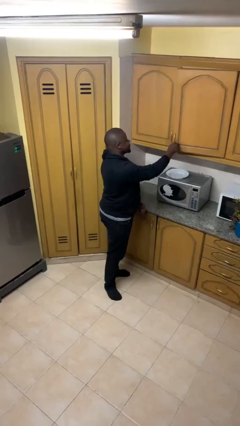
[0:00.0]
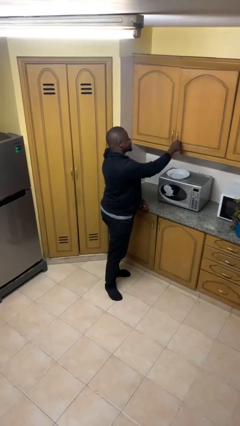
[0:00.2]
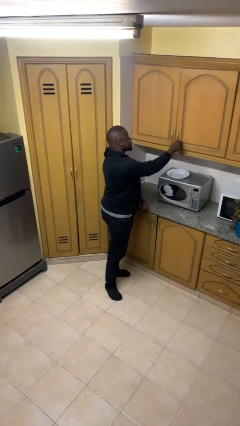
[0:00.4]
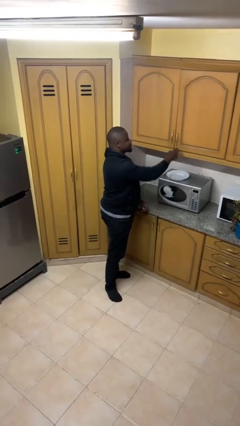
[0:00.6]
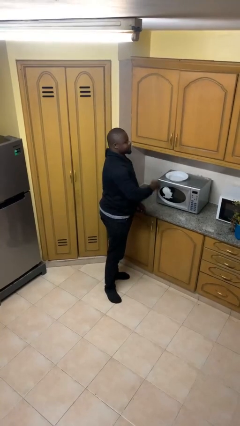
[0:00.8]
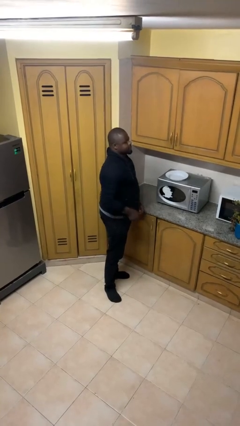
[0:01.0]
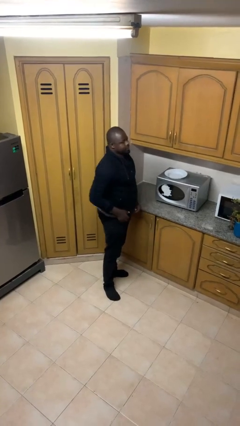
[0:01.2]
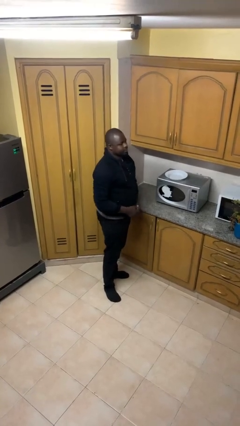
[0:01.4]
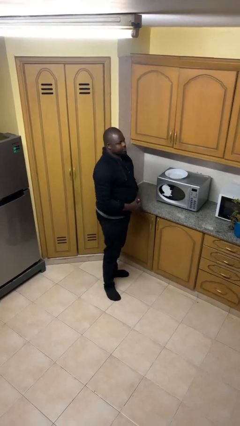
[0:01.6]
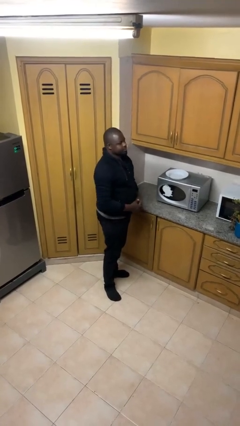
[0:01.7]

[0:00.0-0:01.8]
person closes cabinet

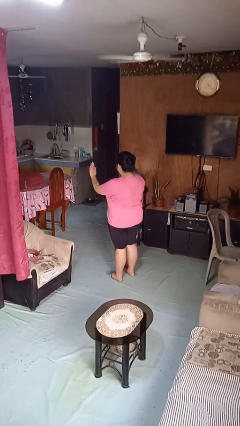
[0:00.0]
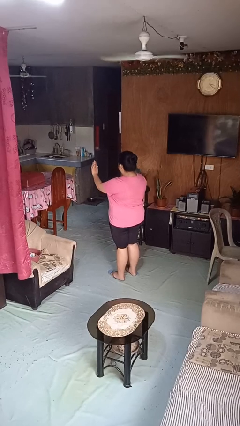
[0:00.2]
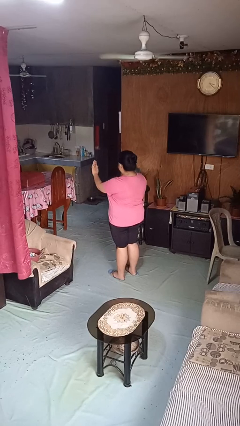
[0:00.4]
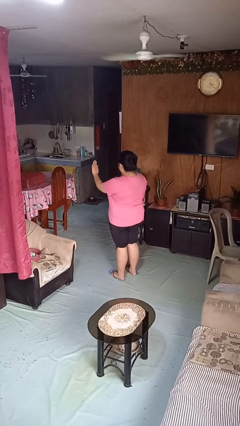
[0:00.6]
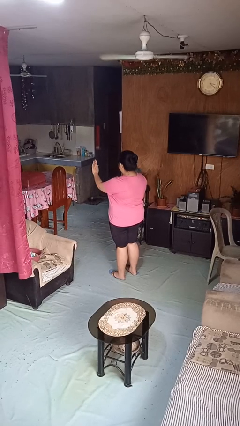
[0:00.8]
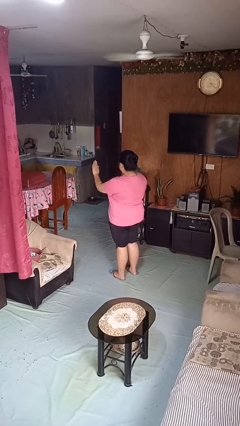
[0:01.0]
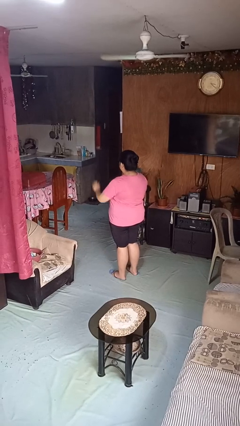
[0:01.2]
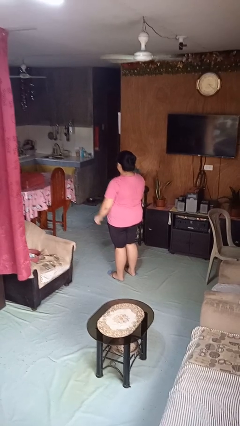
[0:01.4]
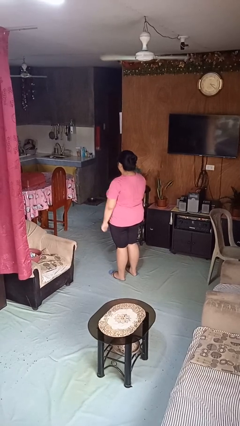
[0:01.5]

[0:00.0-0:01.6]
person gestures stop

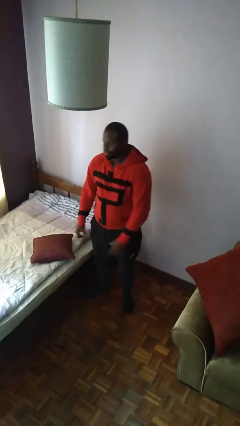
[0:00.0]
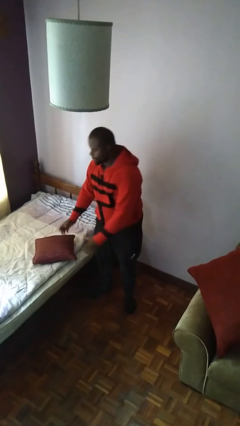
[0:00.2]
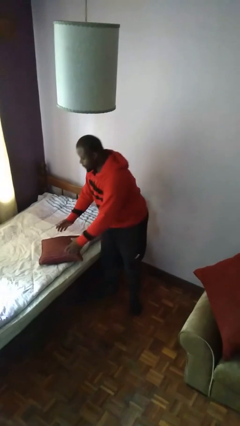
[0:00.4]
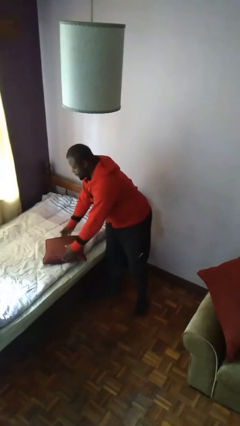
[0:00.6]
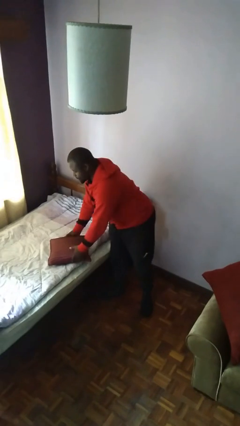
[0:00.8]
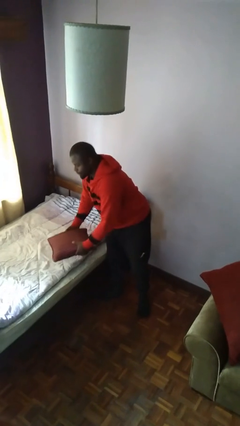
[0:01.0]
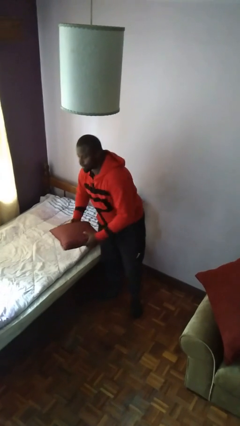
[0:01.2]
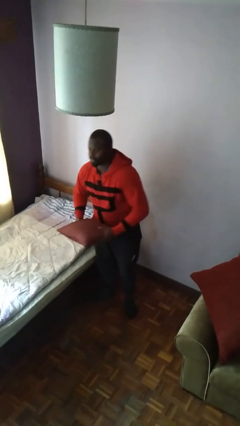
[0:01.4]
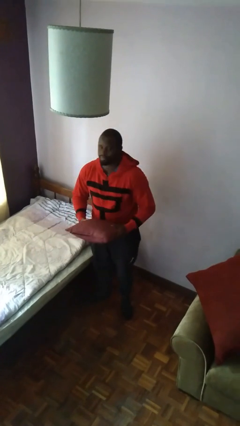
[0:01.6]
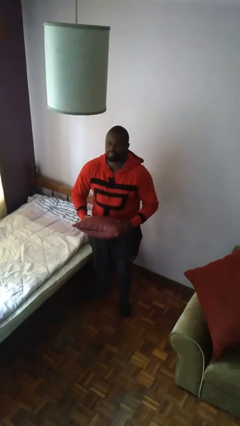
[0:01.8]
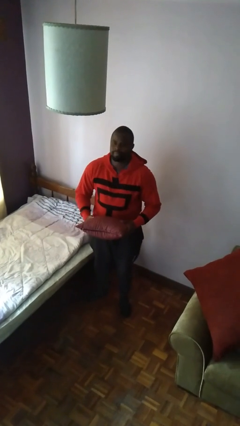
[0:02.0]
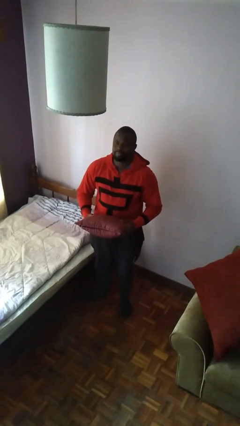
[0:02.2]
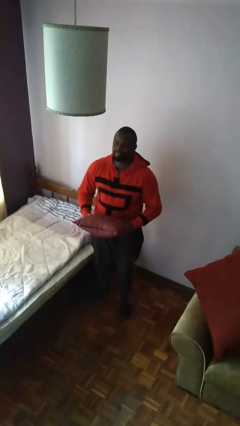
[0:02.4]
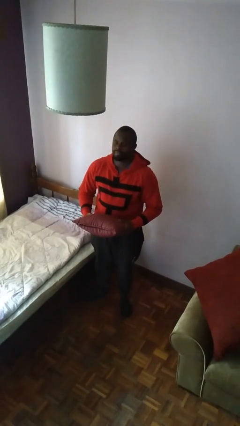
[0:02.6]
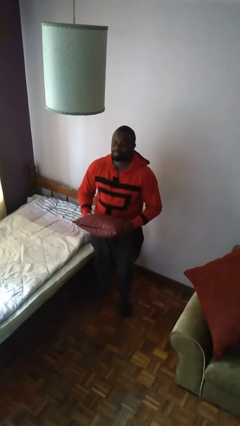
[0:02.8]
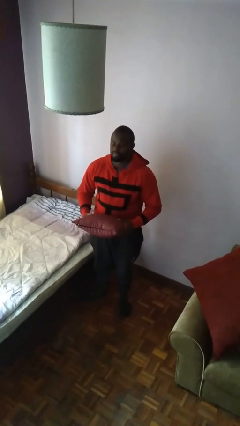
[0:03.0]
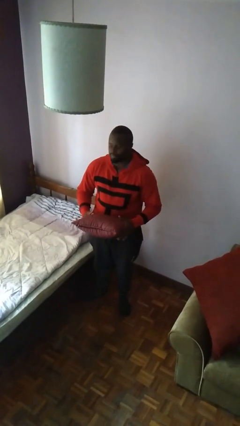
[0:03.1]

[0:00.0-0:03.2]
person picks up object from bed

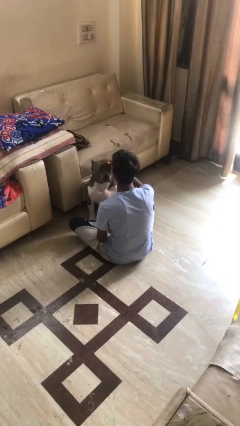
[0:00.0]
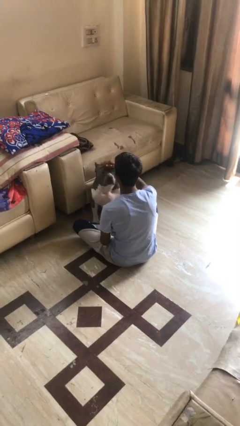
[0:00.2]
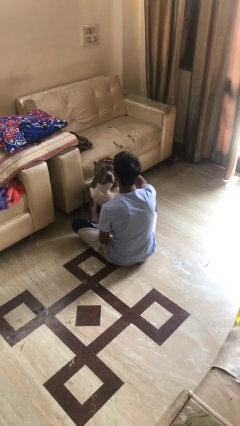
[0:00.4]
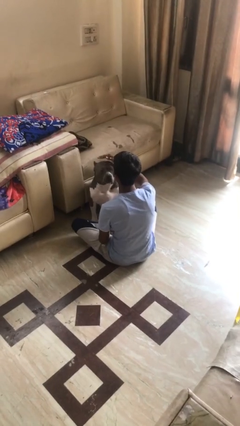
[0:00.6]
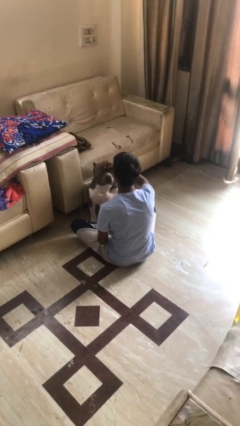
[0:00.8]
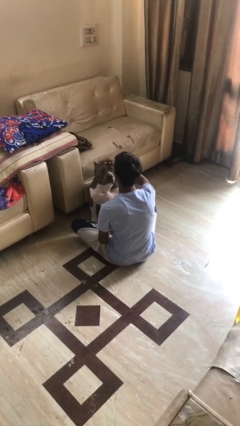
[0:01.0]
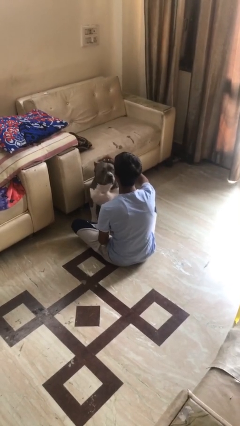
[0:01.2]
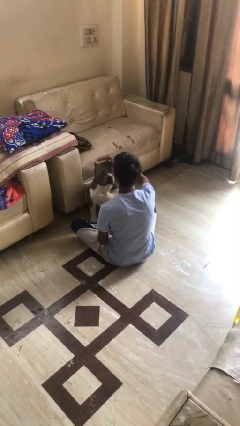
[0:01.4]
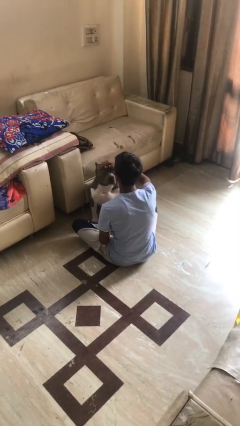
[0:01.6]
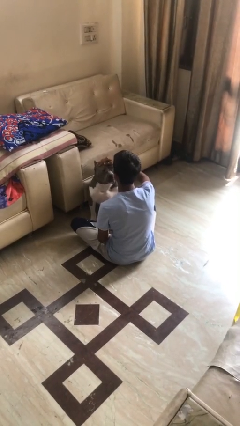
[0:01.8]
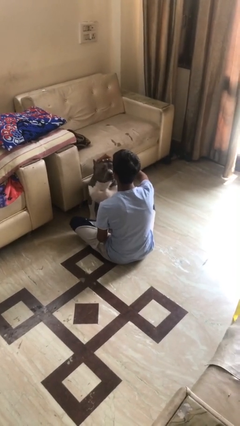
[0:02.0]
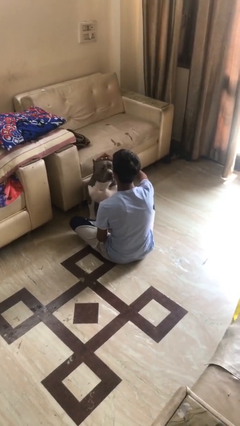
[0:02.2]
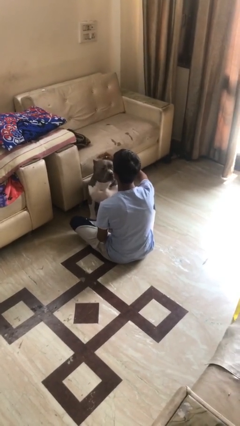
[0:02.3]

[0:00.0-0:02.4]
person pets dog

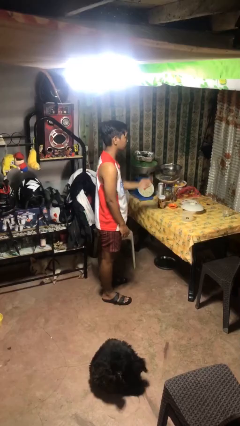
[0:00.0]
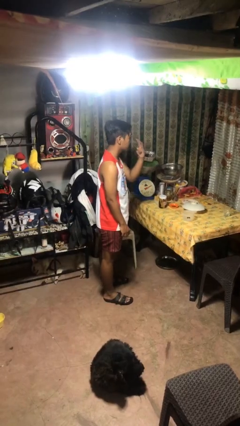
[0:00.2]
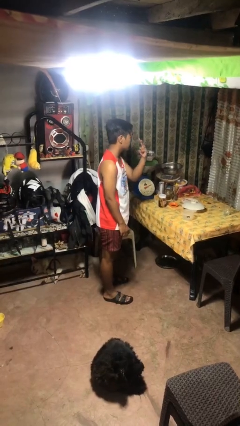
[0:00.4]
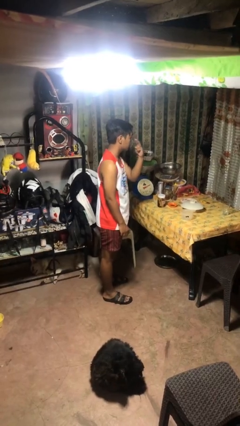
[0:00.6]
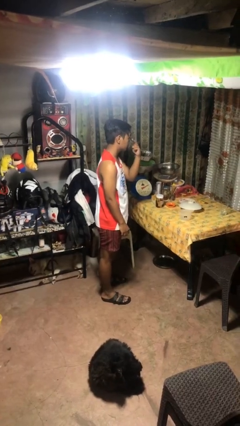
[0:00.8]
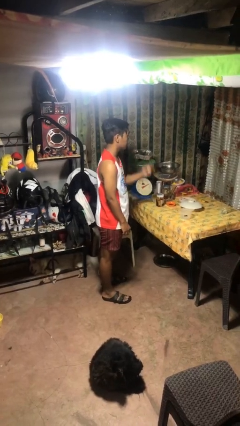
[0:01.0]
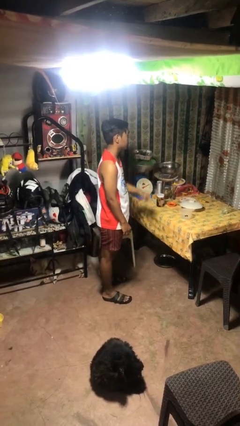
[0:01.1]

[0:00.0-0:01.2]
person gestures watch closely

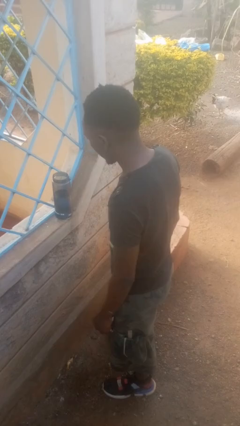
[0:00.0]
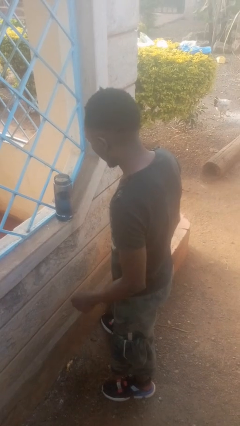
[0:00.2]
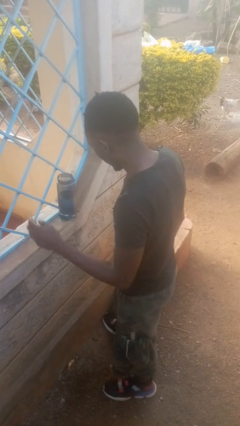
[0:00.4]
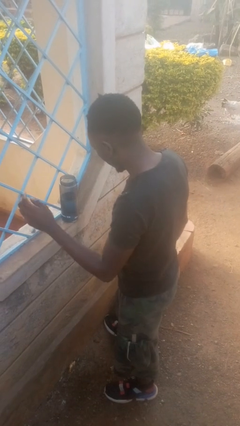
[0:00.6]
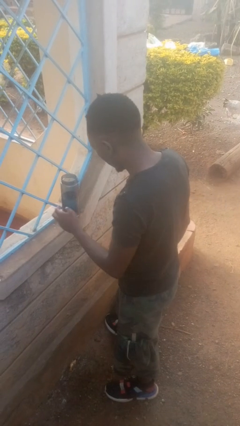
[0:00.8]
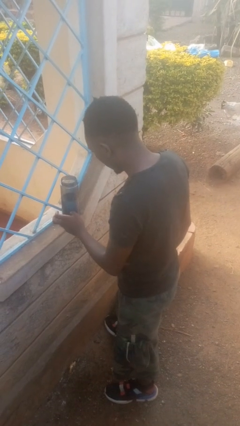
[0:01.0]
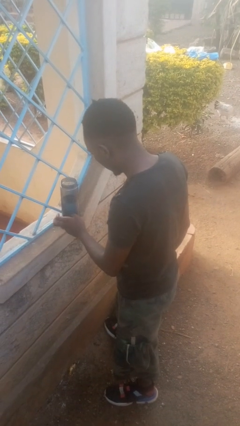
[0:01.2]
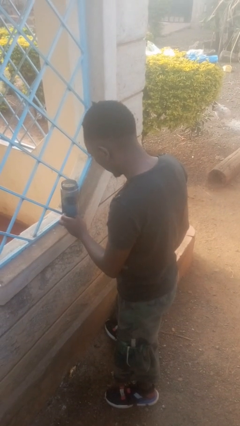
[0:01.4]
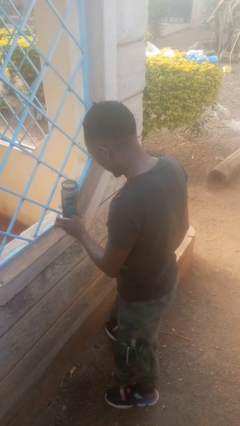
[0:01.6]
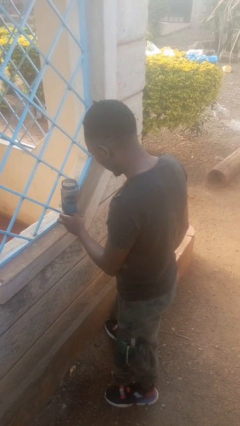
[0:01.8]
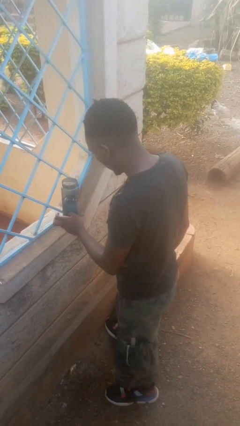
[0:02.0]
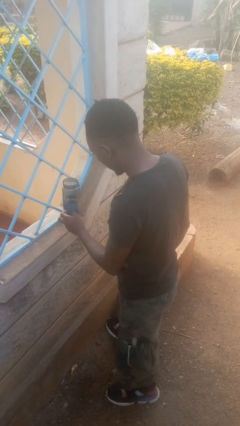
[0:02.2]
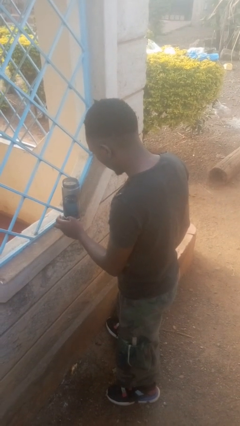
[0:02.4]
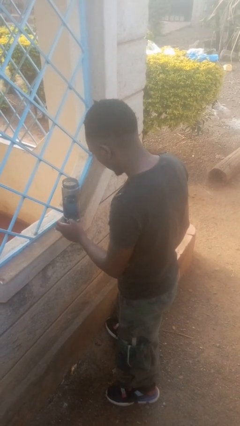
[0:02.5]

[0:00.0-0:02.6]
person taps object with finger

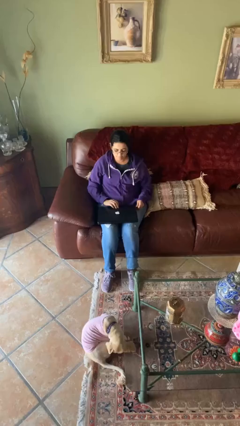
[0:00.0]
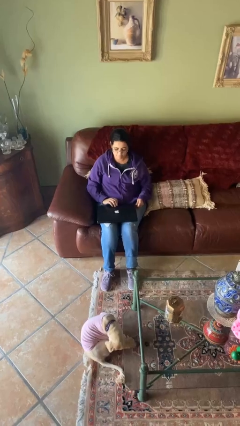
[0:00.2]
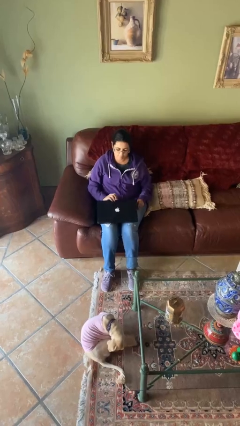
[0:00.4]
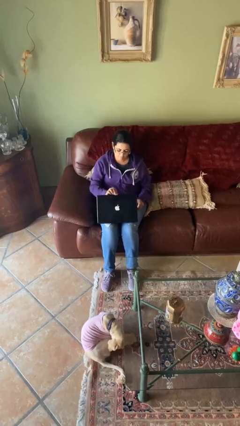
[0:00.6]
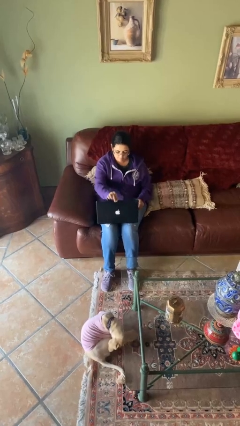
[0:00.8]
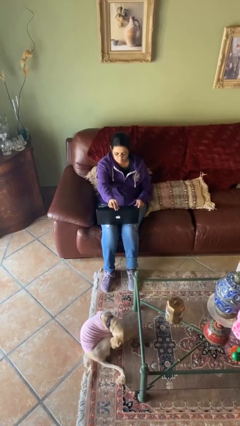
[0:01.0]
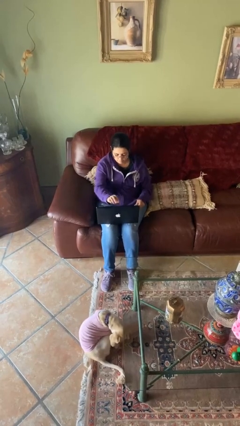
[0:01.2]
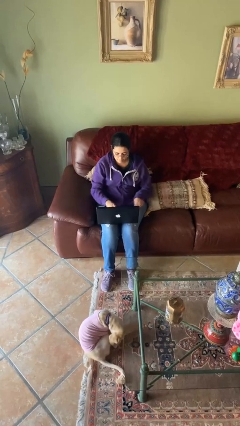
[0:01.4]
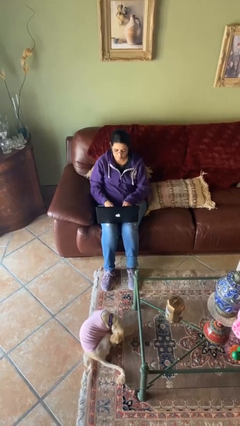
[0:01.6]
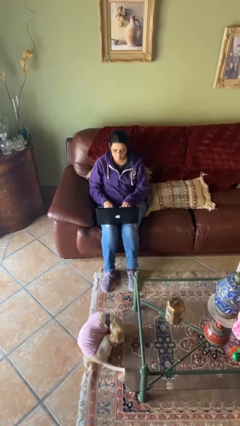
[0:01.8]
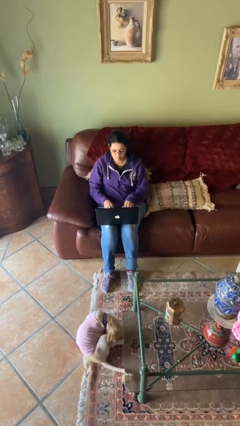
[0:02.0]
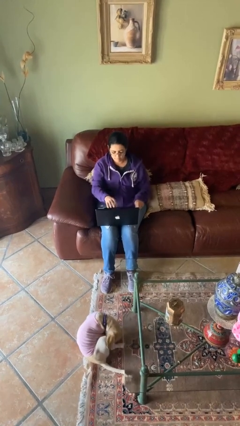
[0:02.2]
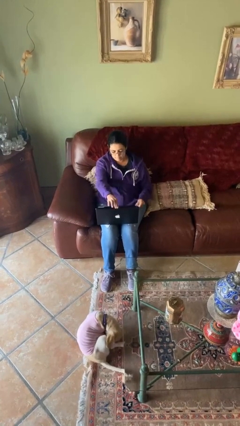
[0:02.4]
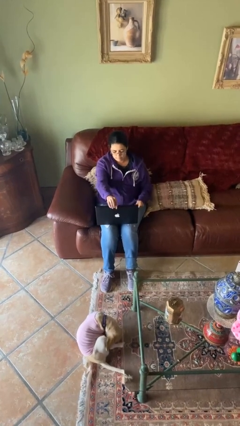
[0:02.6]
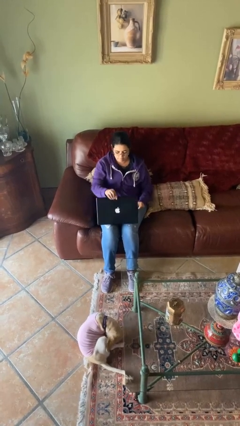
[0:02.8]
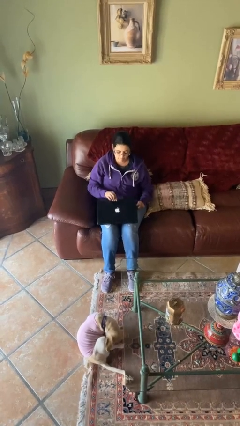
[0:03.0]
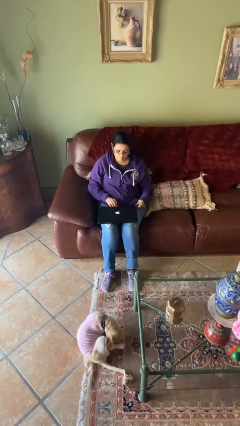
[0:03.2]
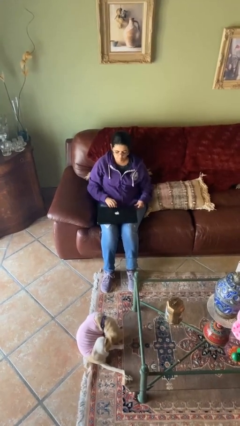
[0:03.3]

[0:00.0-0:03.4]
person interacts with laptop

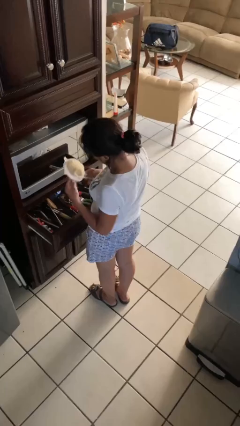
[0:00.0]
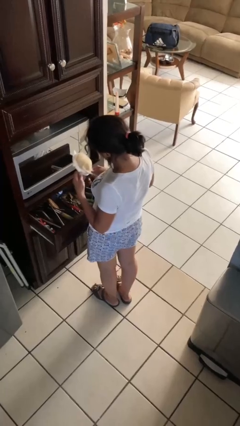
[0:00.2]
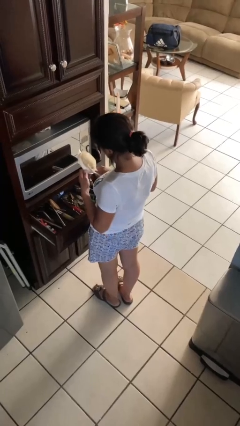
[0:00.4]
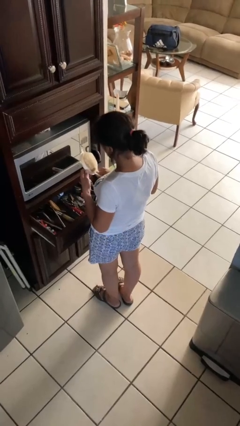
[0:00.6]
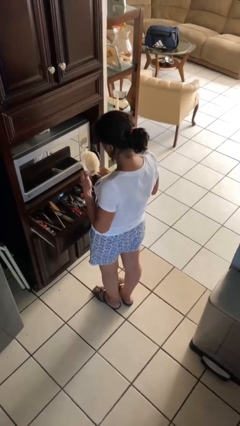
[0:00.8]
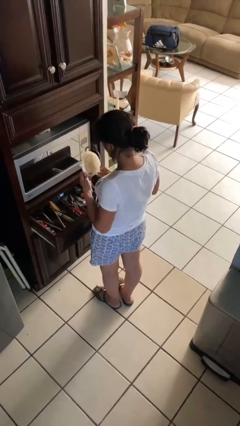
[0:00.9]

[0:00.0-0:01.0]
person takes object from kitchen drawer
